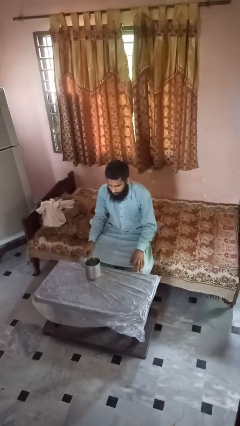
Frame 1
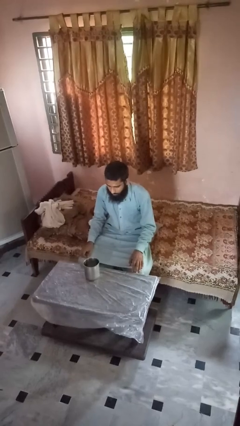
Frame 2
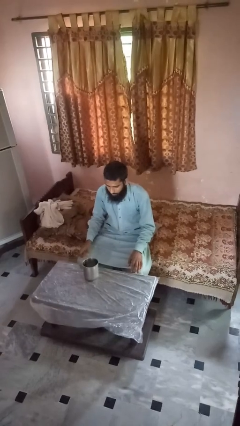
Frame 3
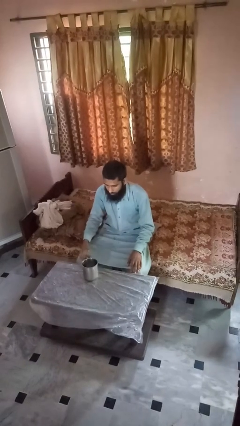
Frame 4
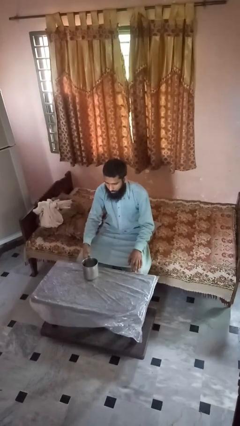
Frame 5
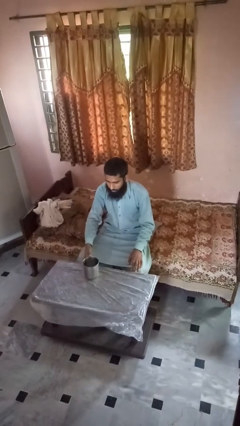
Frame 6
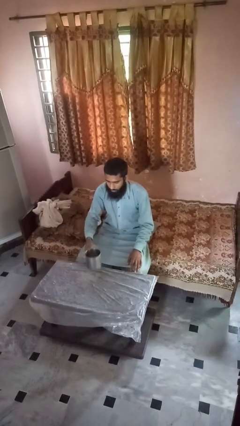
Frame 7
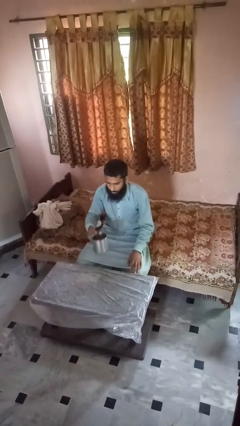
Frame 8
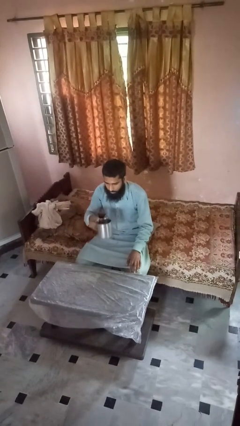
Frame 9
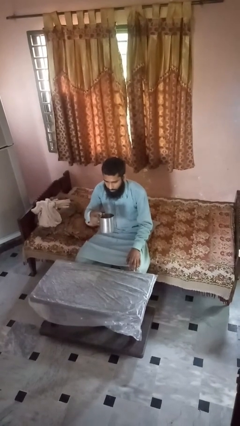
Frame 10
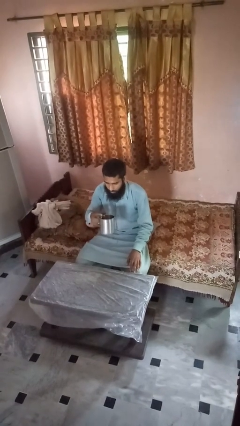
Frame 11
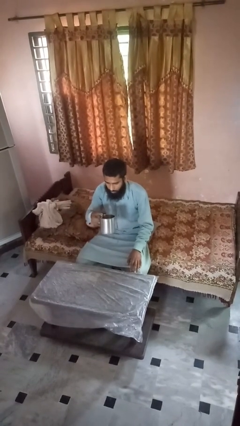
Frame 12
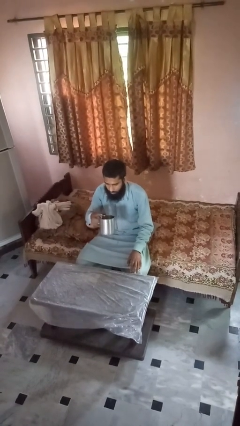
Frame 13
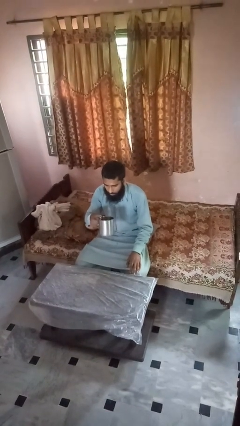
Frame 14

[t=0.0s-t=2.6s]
person picks up object from table

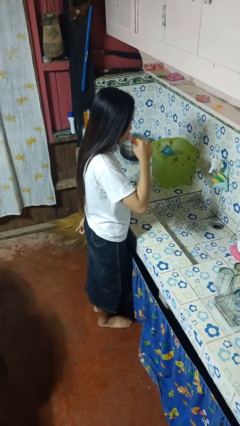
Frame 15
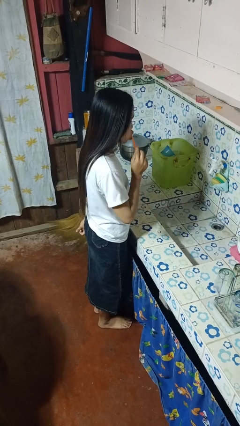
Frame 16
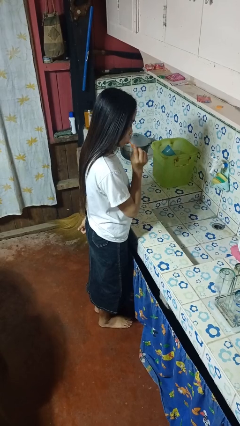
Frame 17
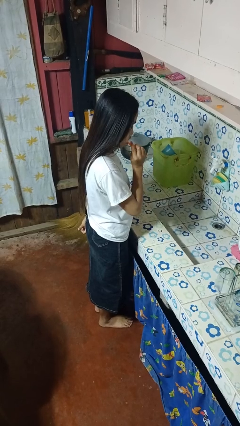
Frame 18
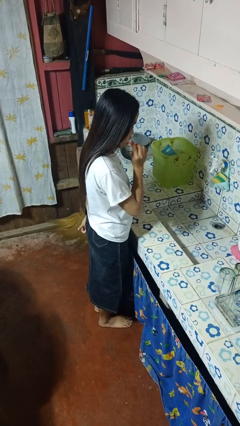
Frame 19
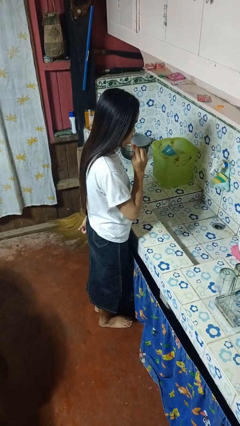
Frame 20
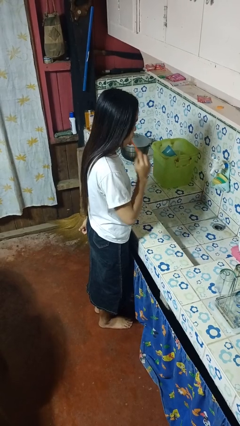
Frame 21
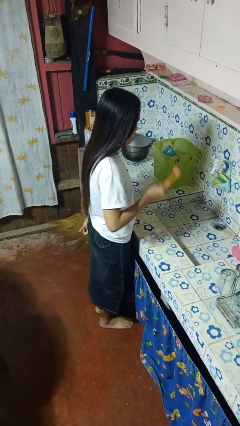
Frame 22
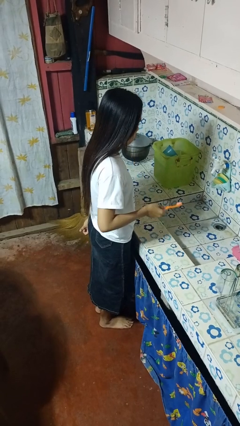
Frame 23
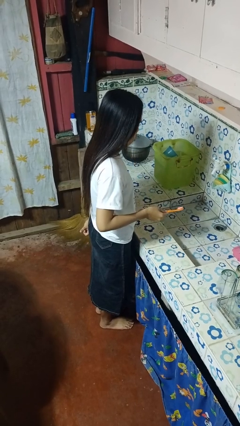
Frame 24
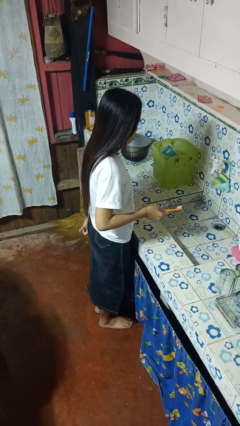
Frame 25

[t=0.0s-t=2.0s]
person brushes teeth

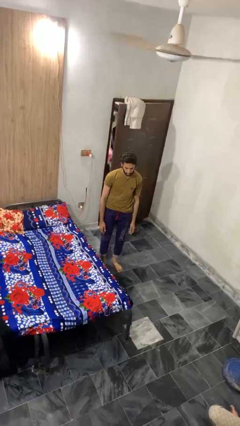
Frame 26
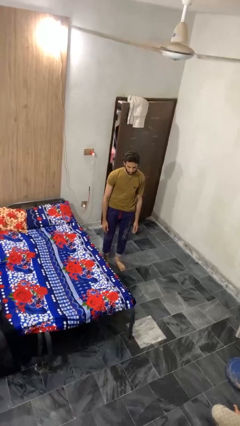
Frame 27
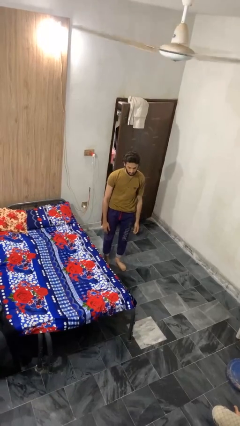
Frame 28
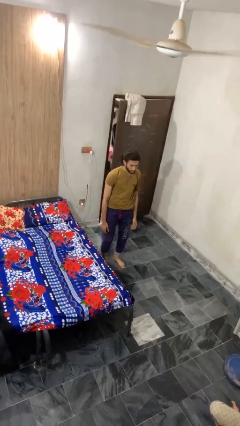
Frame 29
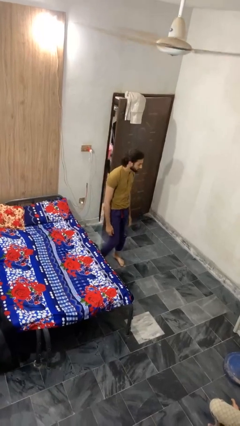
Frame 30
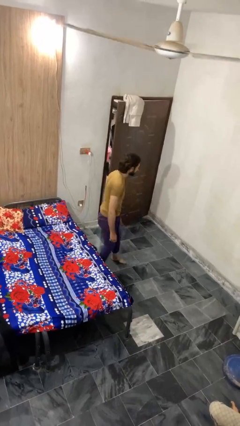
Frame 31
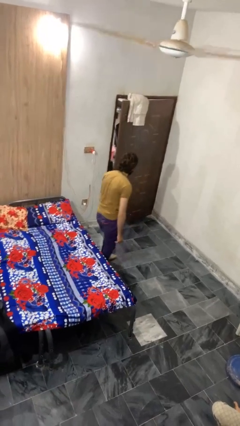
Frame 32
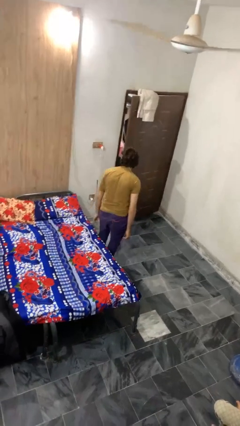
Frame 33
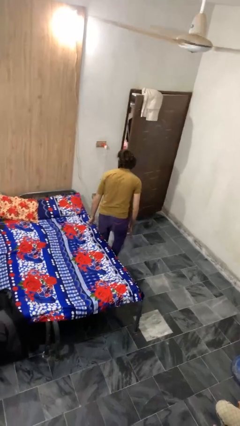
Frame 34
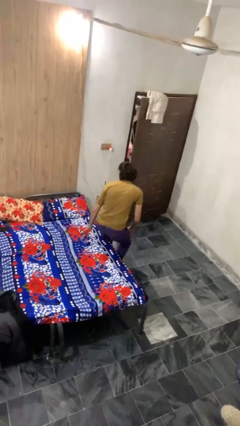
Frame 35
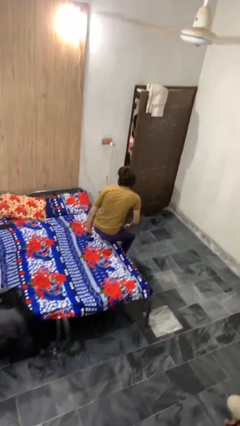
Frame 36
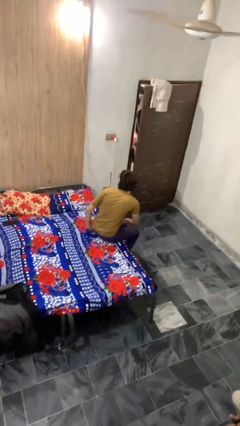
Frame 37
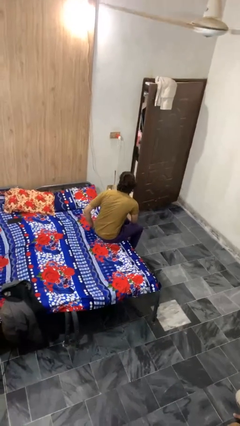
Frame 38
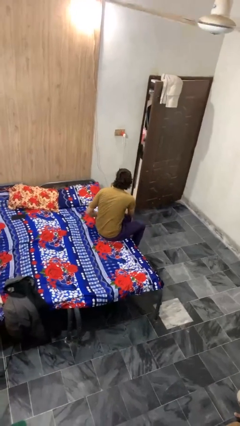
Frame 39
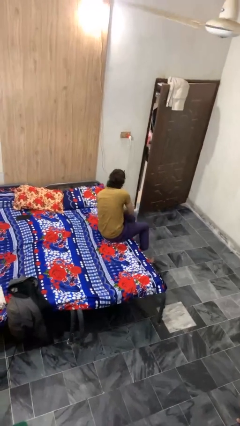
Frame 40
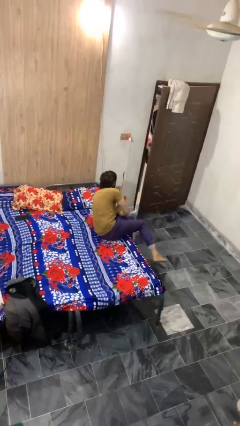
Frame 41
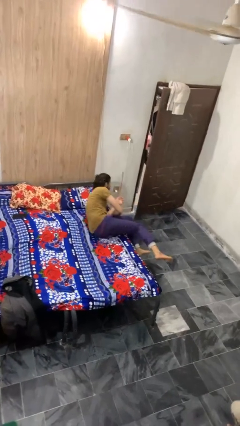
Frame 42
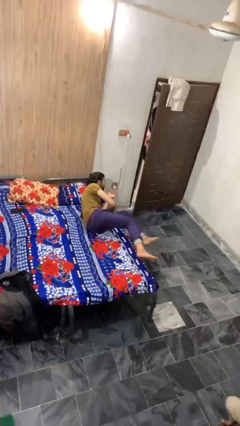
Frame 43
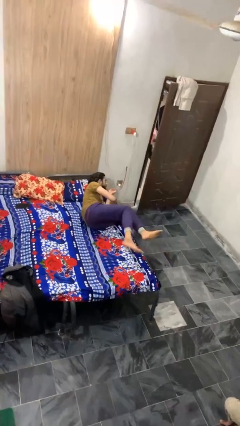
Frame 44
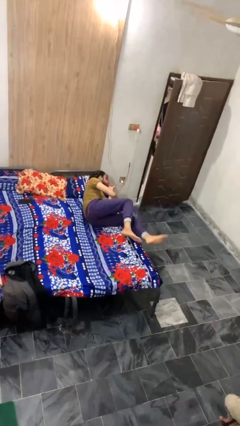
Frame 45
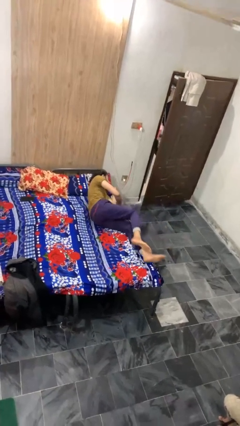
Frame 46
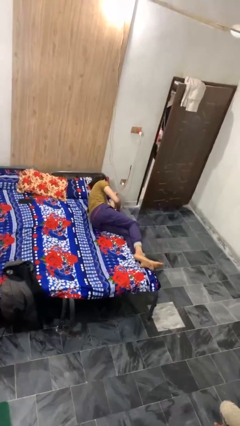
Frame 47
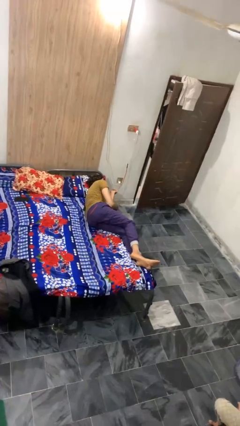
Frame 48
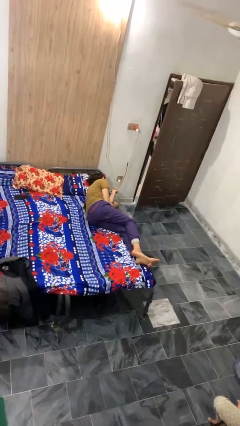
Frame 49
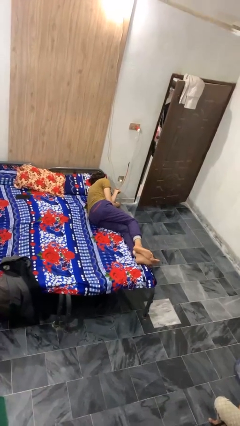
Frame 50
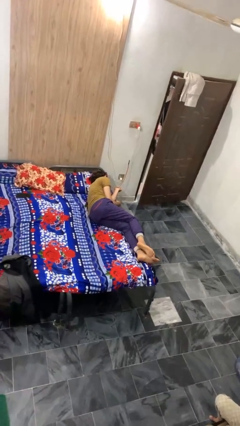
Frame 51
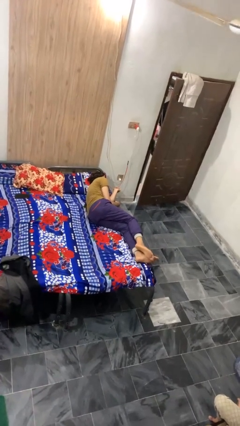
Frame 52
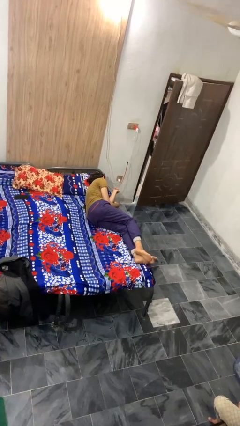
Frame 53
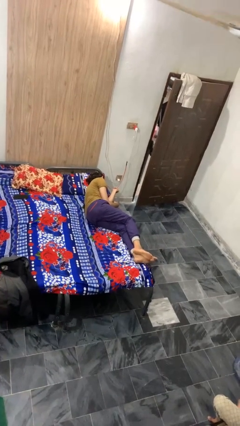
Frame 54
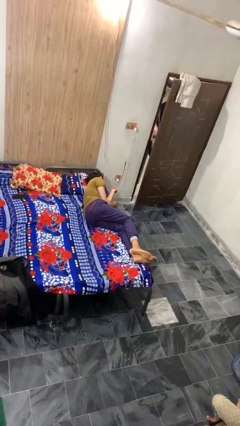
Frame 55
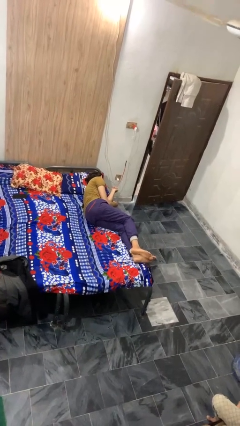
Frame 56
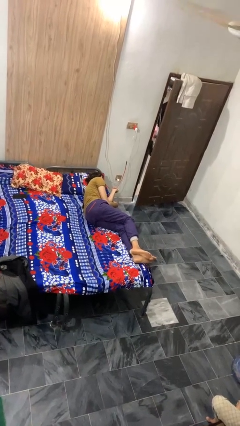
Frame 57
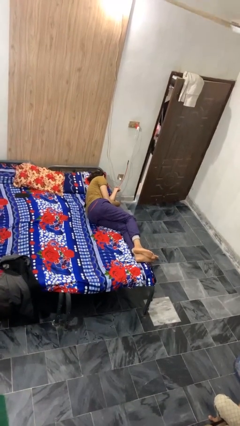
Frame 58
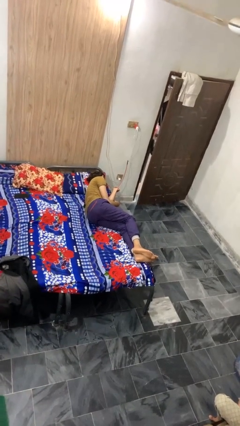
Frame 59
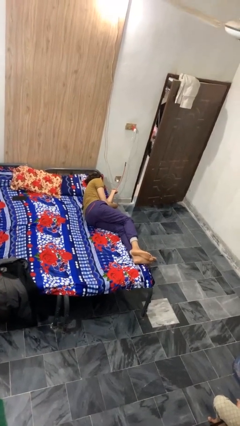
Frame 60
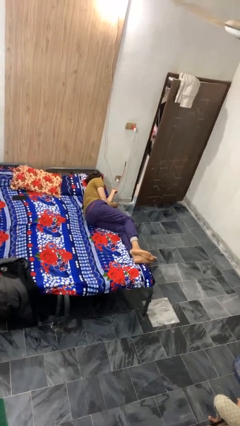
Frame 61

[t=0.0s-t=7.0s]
person lies down on bed

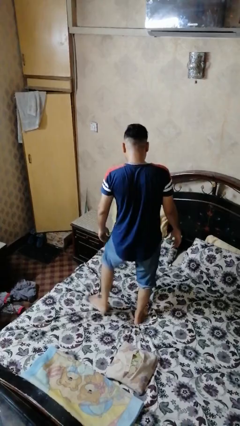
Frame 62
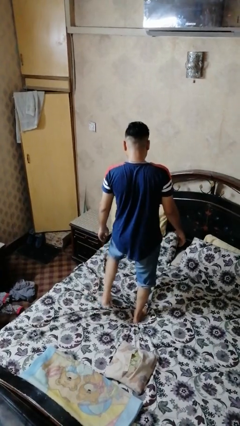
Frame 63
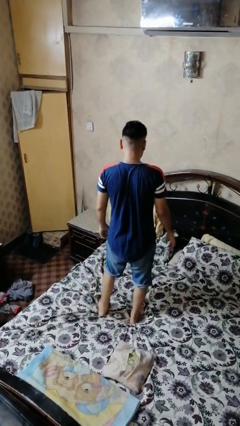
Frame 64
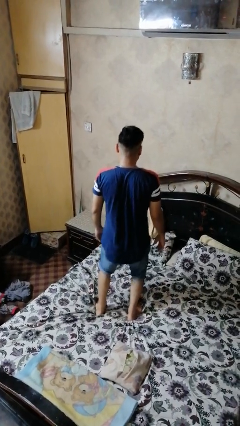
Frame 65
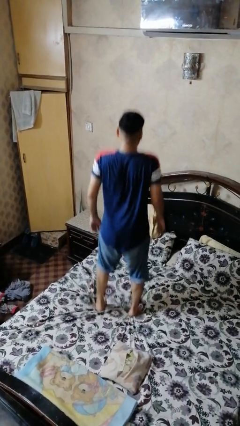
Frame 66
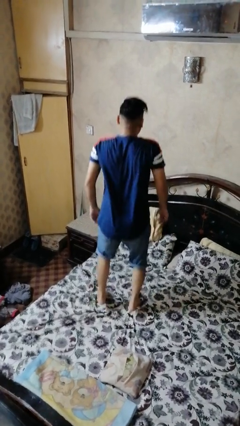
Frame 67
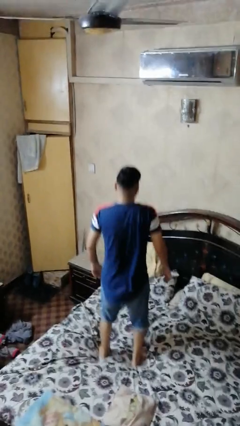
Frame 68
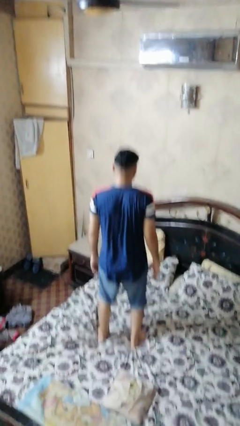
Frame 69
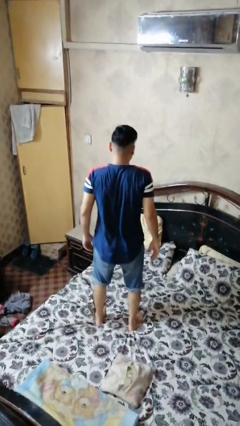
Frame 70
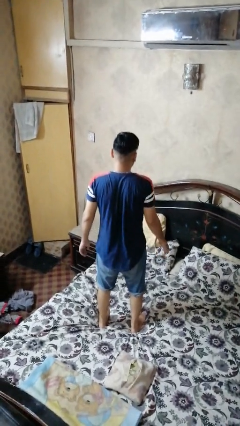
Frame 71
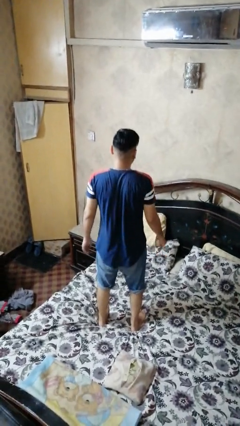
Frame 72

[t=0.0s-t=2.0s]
person jumps on bed

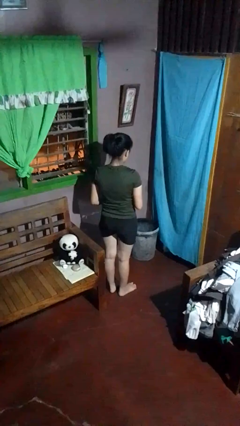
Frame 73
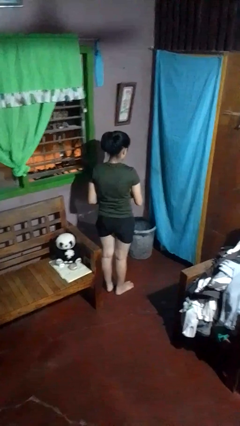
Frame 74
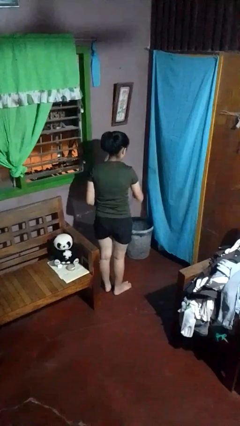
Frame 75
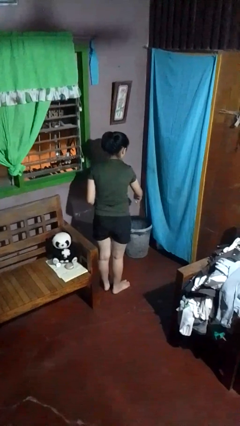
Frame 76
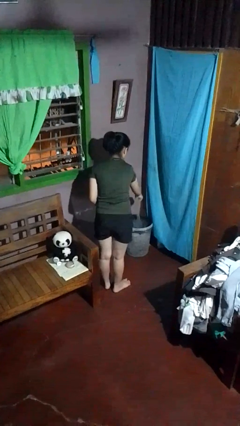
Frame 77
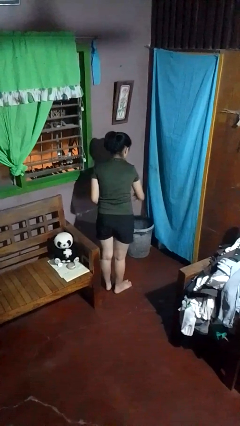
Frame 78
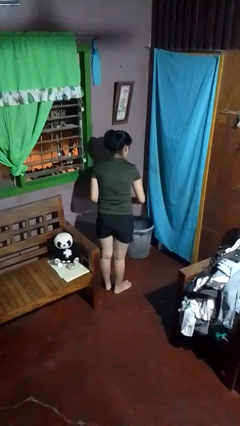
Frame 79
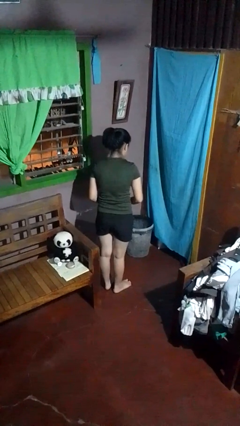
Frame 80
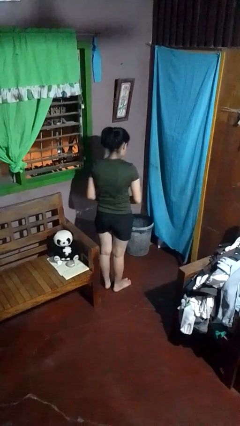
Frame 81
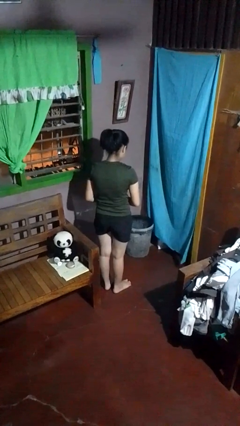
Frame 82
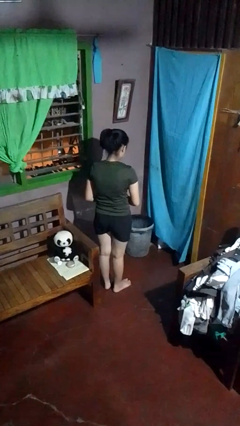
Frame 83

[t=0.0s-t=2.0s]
person discards trash

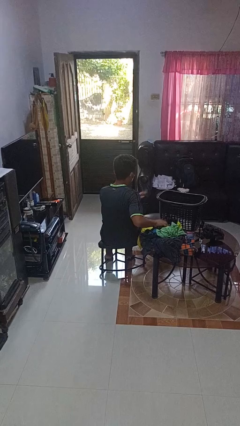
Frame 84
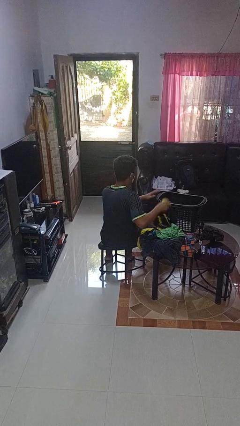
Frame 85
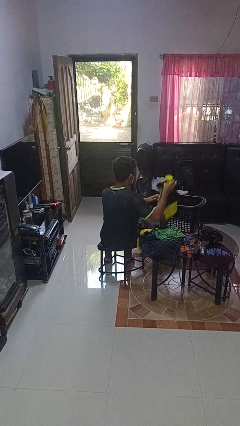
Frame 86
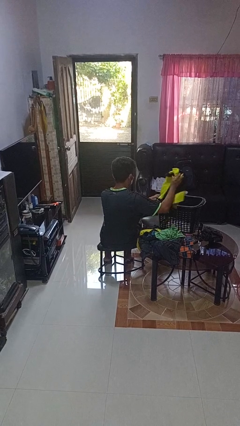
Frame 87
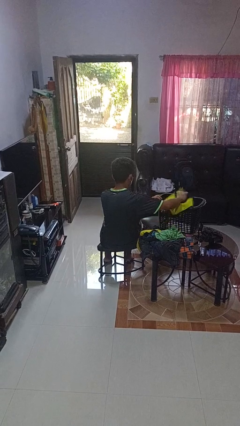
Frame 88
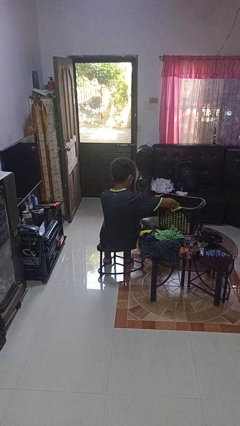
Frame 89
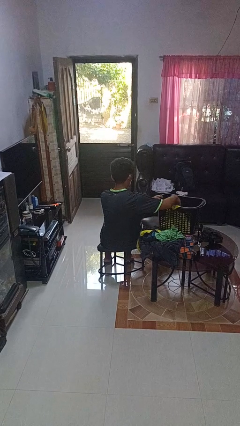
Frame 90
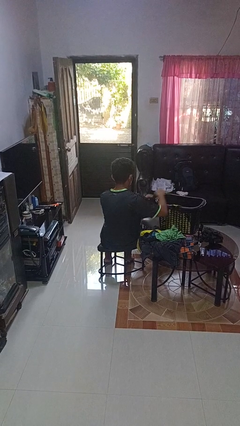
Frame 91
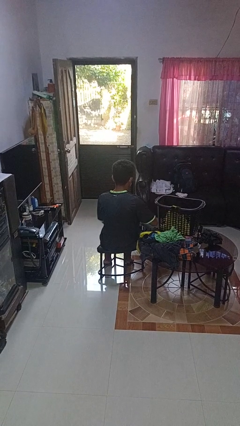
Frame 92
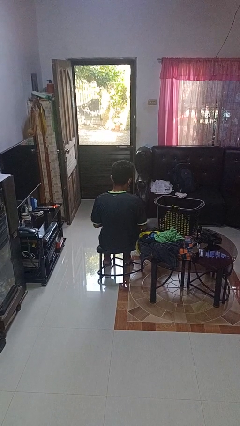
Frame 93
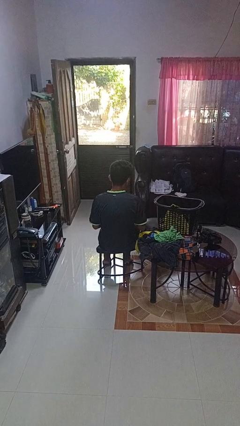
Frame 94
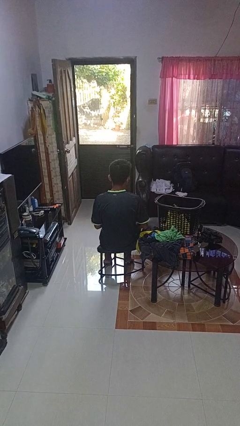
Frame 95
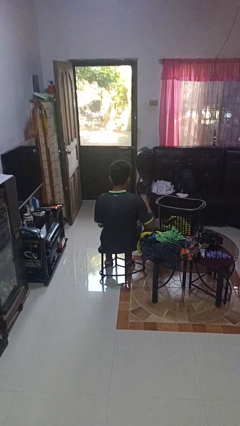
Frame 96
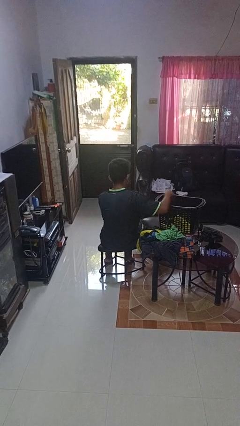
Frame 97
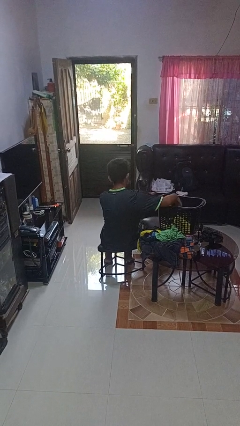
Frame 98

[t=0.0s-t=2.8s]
person puts object into basket
